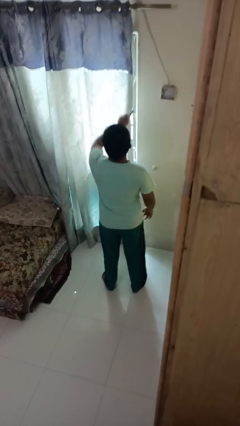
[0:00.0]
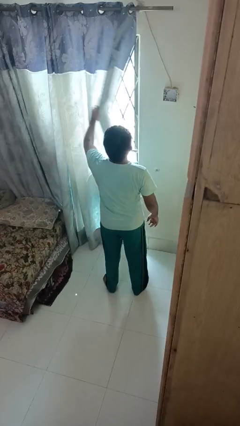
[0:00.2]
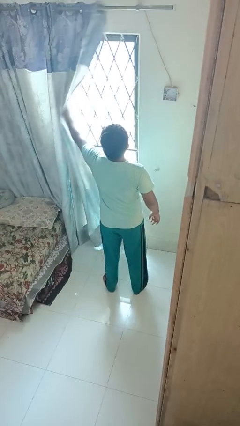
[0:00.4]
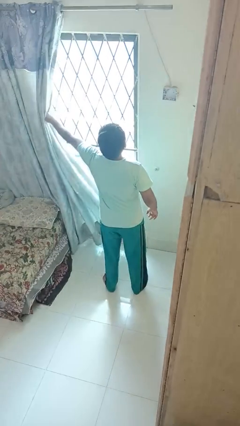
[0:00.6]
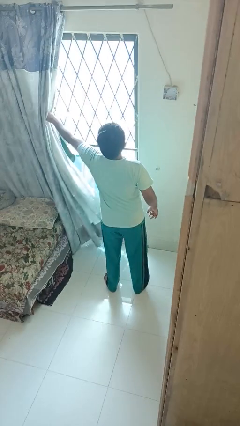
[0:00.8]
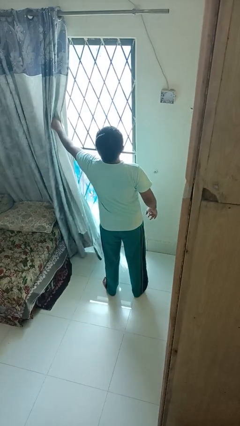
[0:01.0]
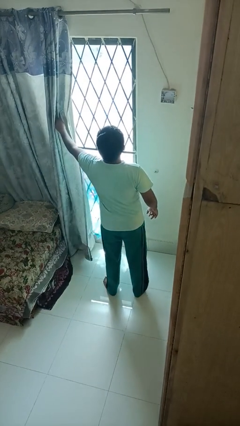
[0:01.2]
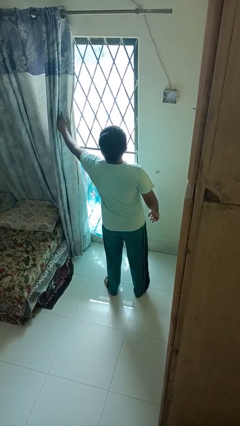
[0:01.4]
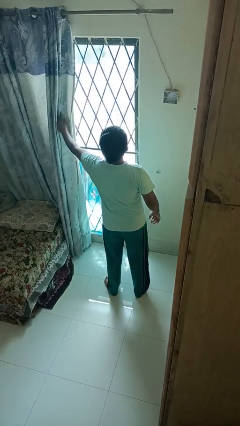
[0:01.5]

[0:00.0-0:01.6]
person opens curtains

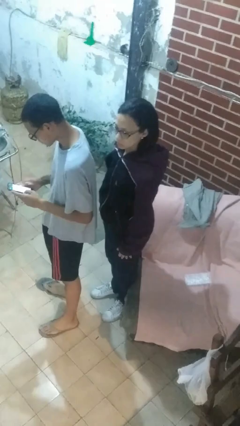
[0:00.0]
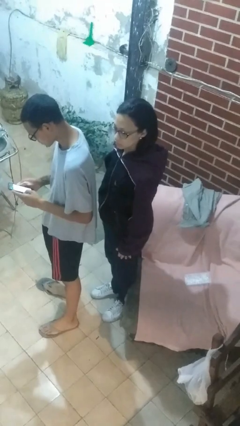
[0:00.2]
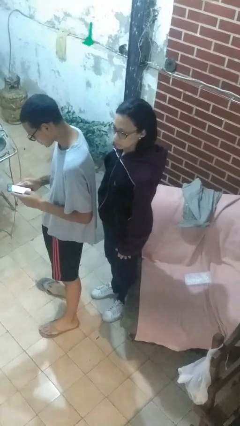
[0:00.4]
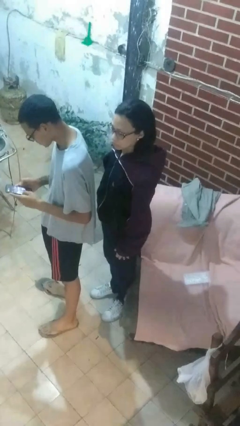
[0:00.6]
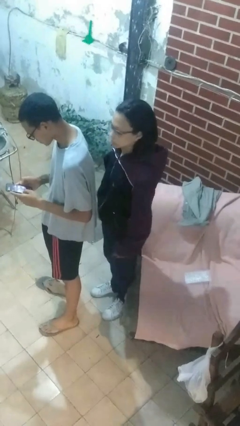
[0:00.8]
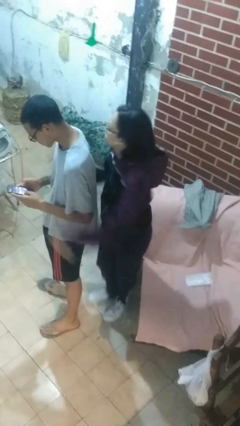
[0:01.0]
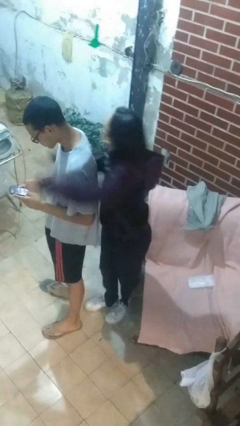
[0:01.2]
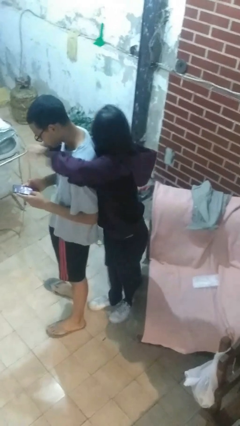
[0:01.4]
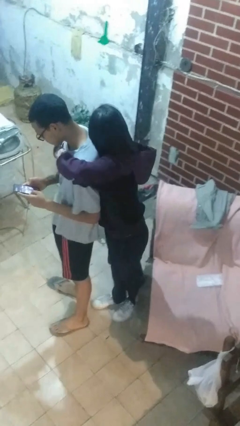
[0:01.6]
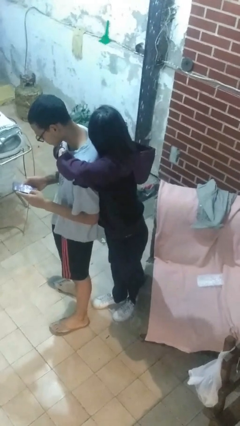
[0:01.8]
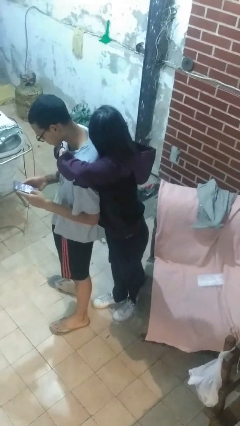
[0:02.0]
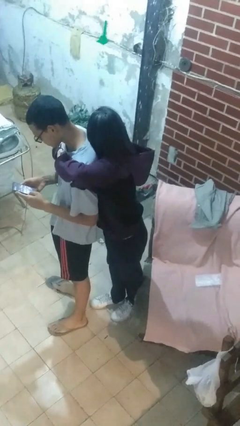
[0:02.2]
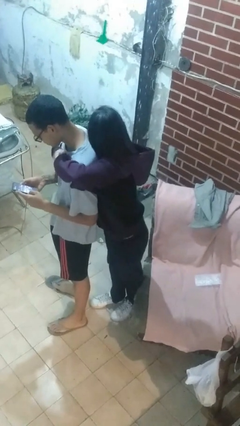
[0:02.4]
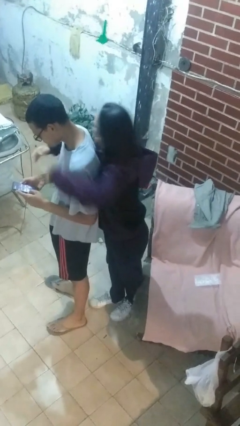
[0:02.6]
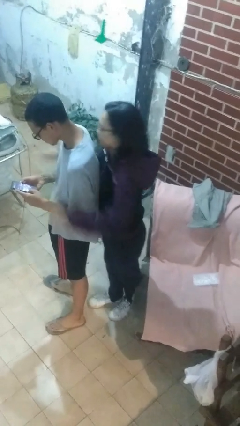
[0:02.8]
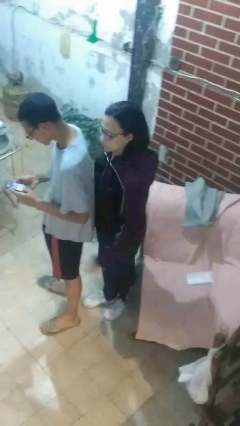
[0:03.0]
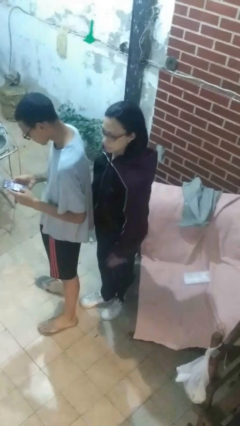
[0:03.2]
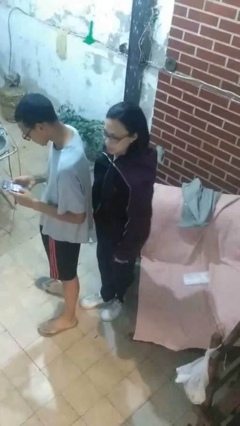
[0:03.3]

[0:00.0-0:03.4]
person hugs person from behind

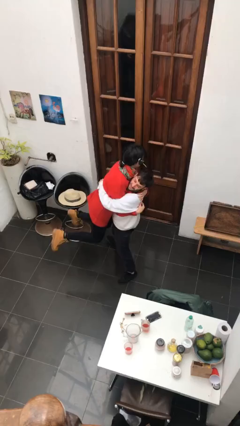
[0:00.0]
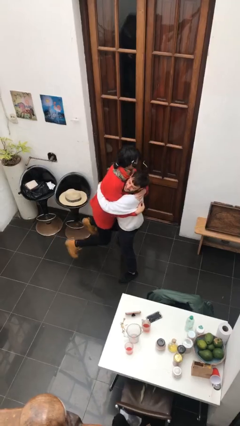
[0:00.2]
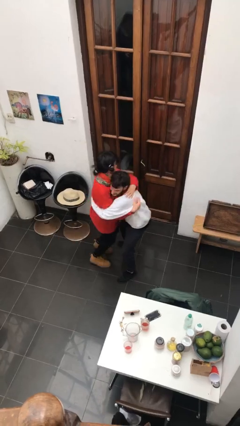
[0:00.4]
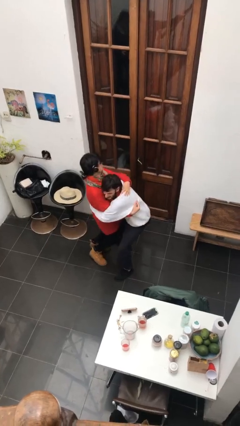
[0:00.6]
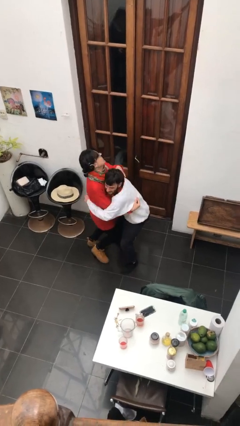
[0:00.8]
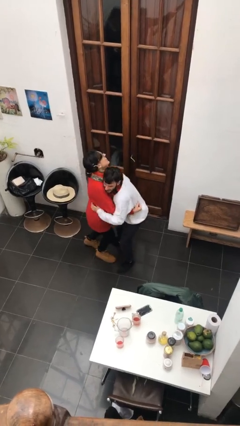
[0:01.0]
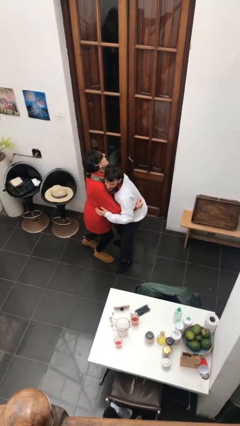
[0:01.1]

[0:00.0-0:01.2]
person puts down person

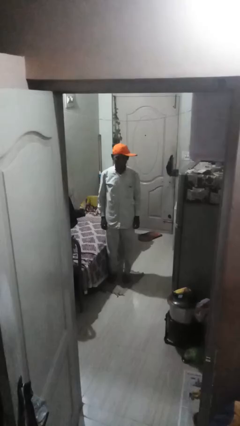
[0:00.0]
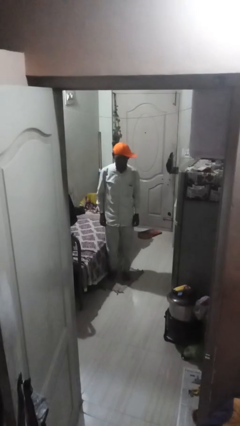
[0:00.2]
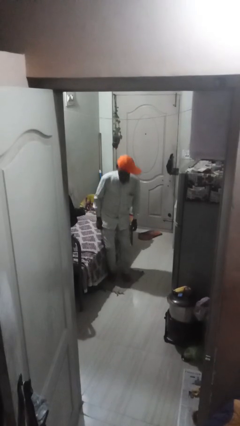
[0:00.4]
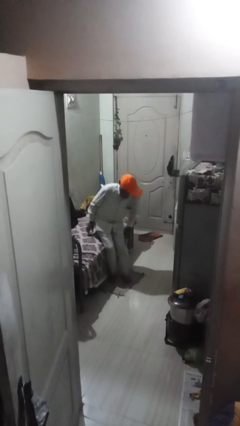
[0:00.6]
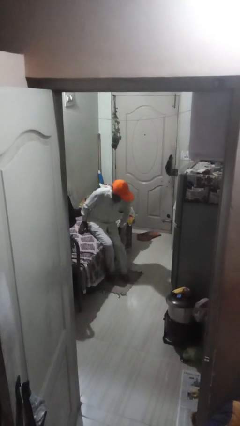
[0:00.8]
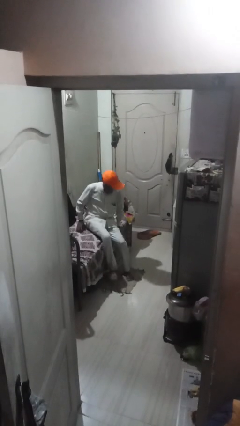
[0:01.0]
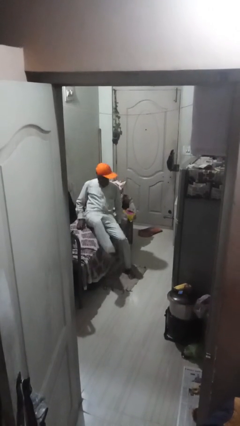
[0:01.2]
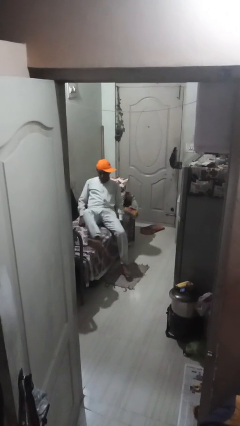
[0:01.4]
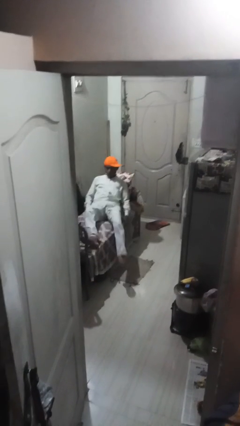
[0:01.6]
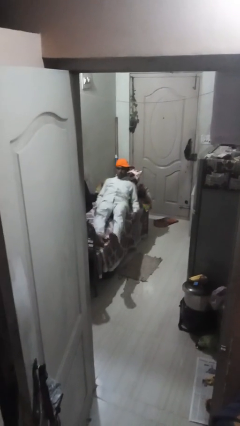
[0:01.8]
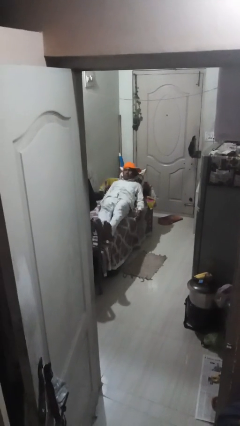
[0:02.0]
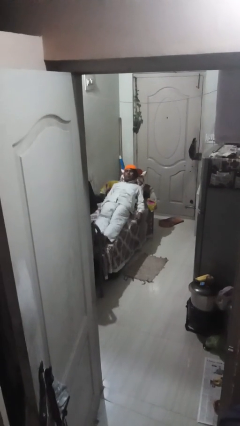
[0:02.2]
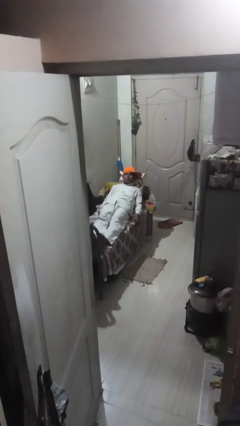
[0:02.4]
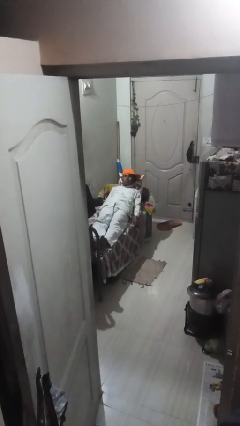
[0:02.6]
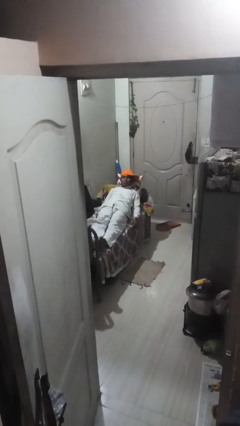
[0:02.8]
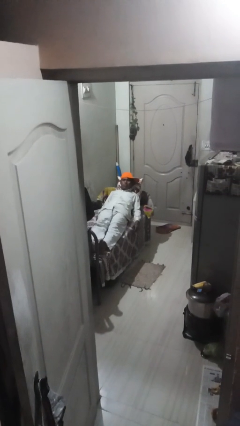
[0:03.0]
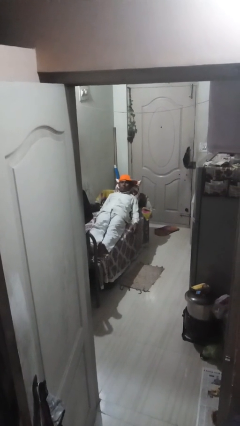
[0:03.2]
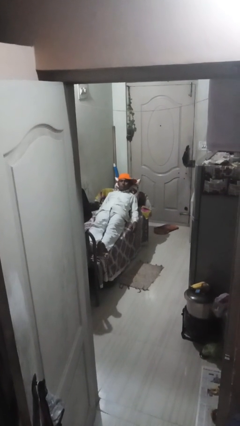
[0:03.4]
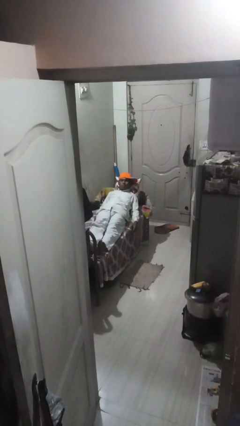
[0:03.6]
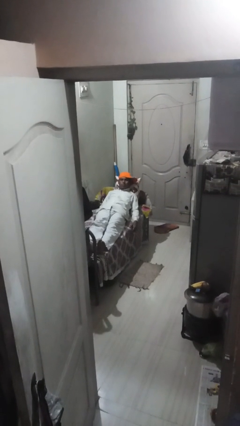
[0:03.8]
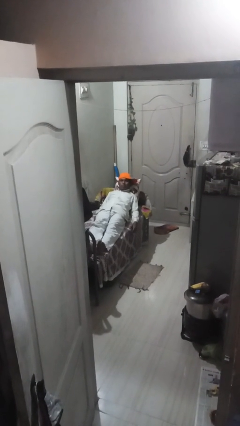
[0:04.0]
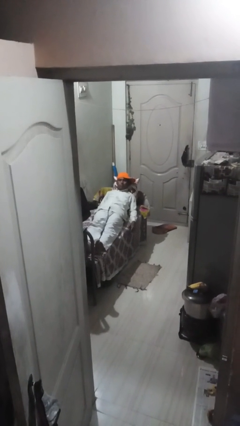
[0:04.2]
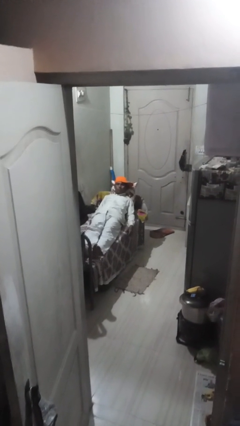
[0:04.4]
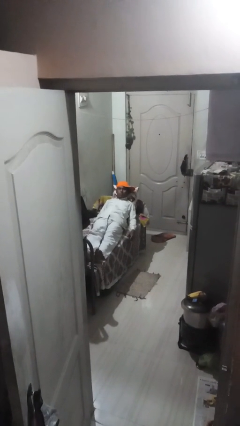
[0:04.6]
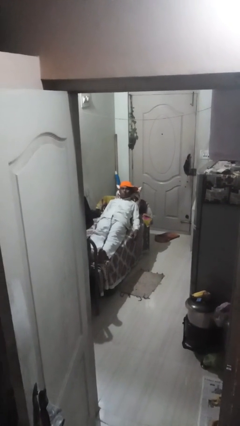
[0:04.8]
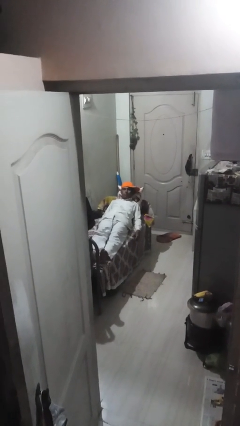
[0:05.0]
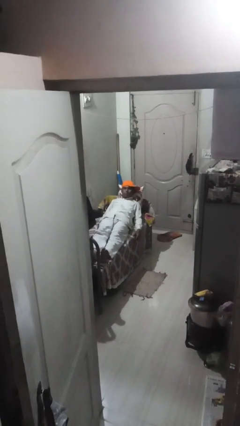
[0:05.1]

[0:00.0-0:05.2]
person lies down on bed

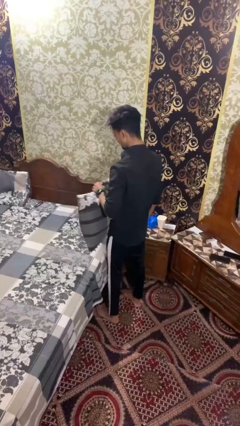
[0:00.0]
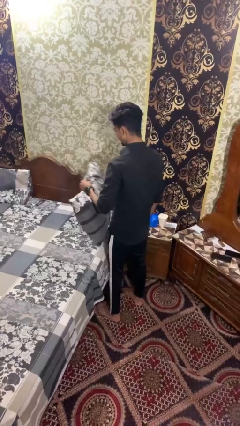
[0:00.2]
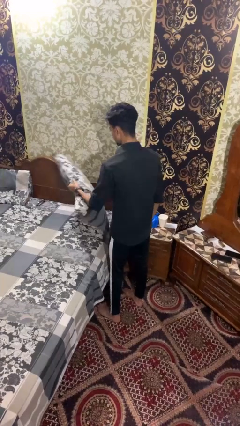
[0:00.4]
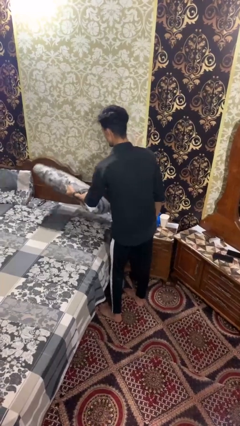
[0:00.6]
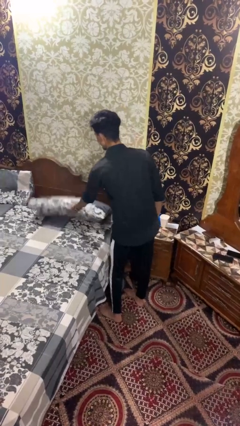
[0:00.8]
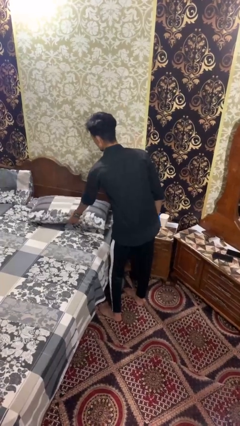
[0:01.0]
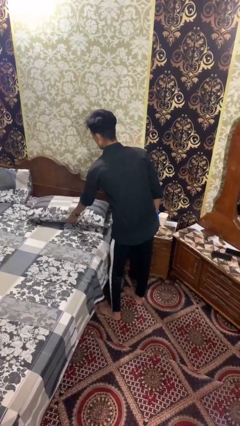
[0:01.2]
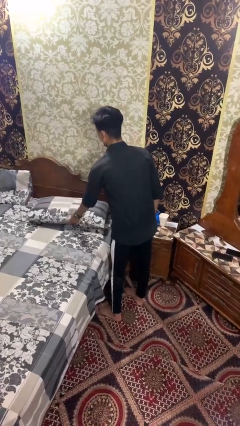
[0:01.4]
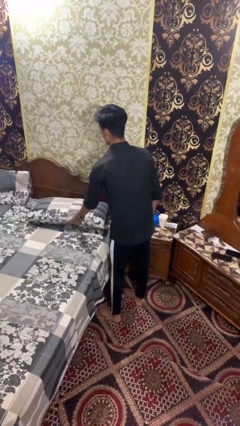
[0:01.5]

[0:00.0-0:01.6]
person puts down object on bed

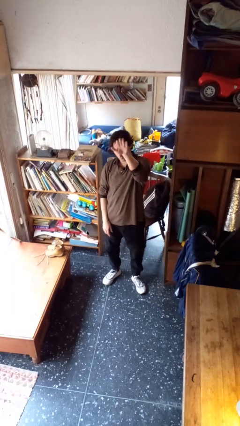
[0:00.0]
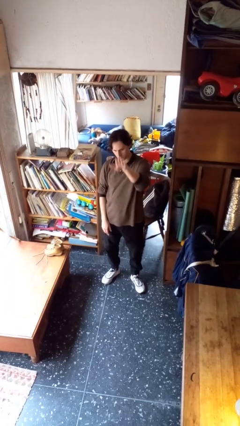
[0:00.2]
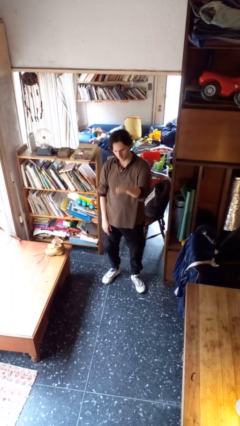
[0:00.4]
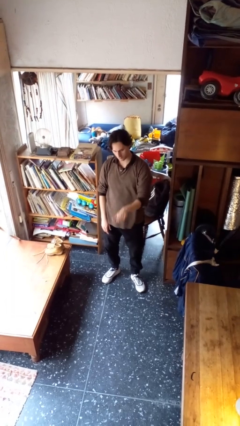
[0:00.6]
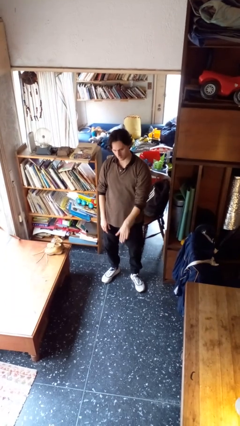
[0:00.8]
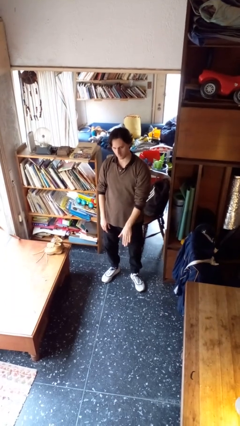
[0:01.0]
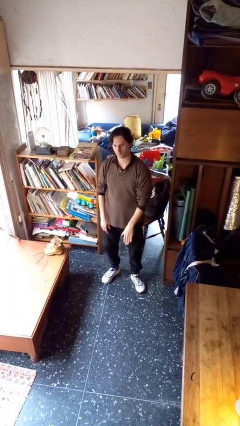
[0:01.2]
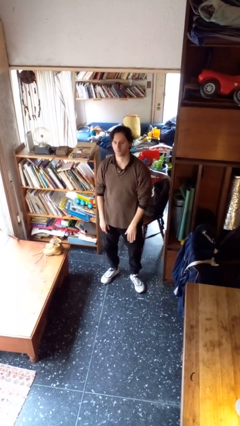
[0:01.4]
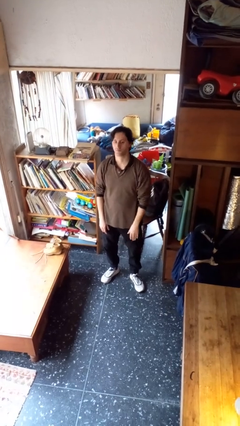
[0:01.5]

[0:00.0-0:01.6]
person gestures swipe down

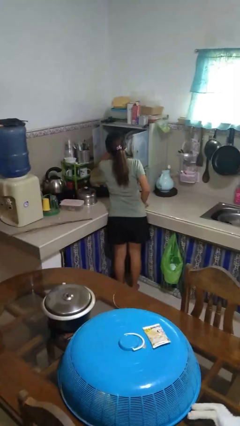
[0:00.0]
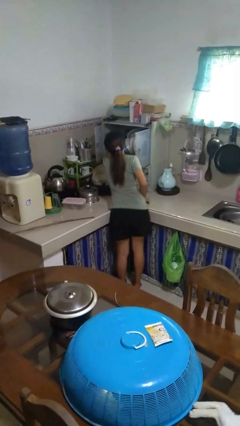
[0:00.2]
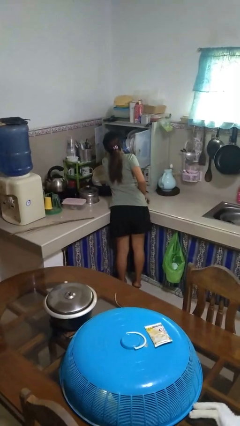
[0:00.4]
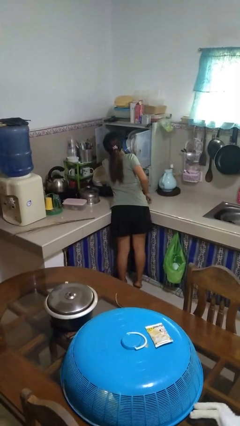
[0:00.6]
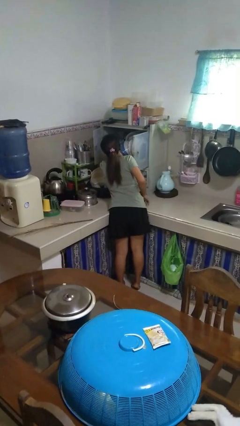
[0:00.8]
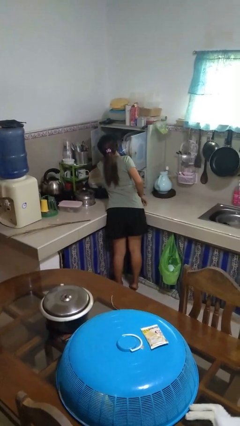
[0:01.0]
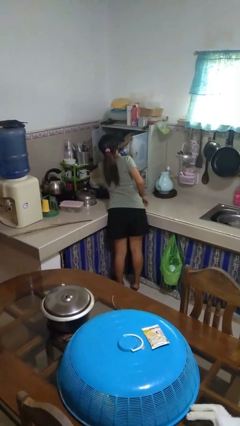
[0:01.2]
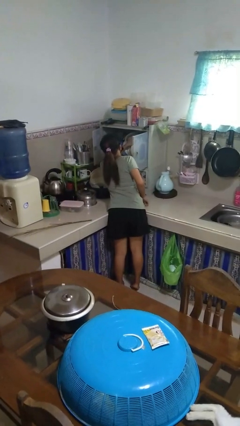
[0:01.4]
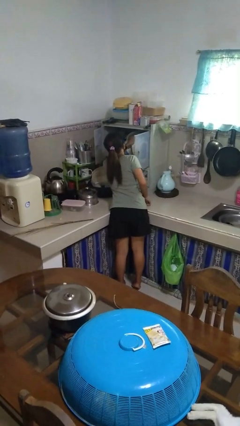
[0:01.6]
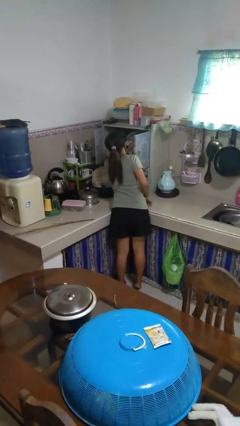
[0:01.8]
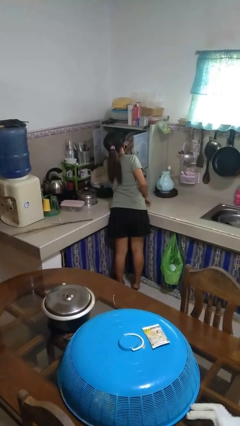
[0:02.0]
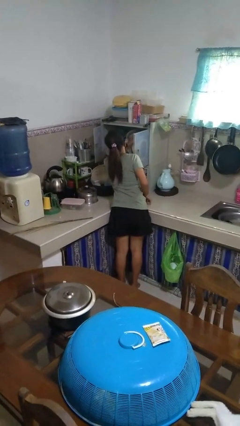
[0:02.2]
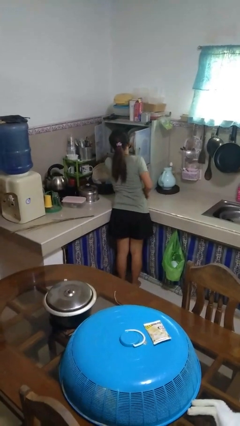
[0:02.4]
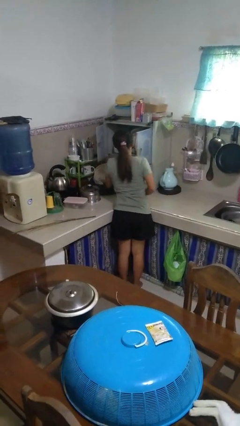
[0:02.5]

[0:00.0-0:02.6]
person searches in kitchen drawer
